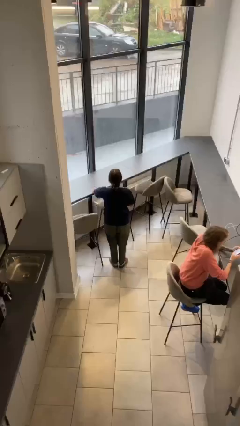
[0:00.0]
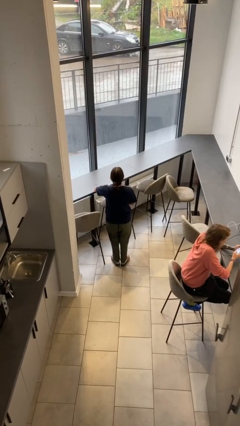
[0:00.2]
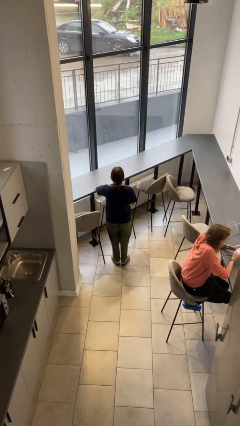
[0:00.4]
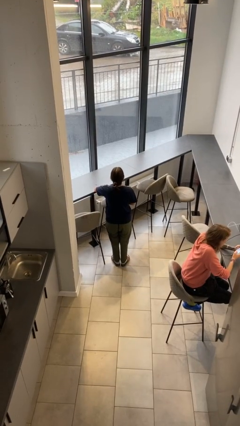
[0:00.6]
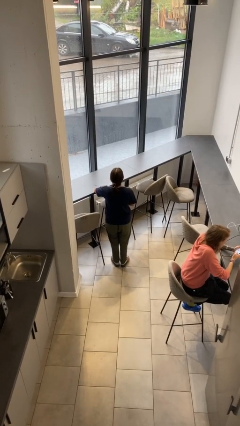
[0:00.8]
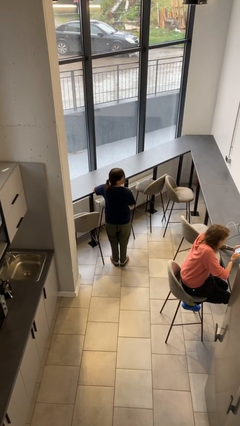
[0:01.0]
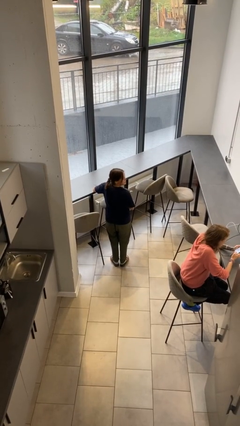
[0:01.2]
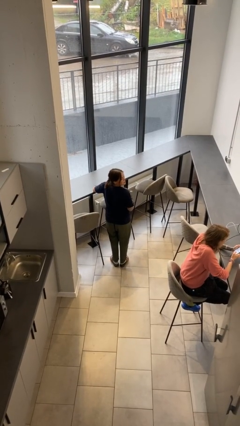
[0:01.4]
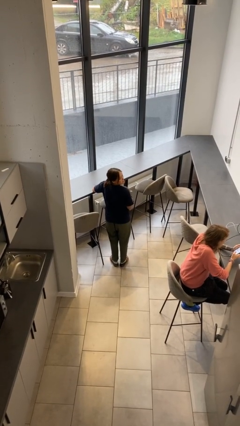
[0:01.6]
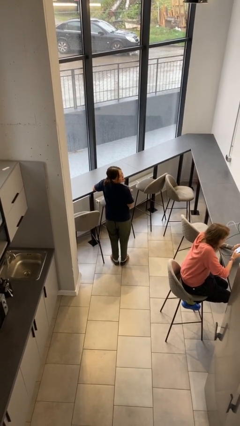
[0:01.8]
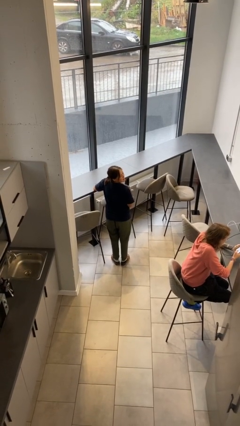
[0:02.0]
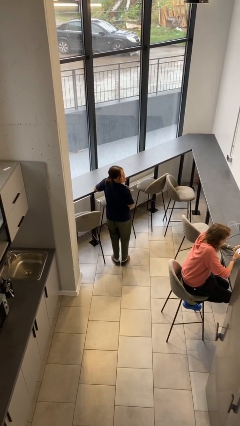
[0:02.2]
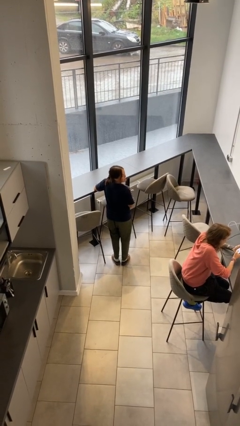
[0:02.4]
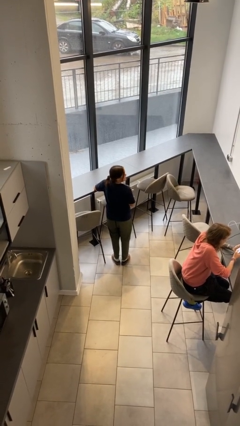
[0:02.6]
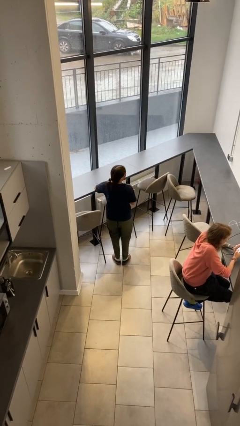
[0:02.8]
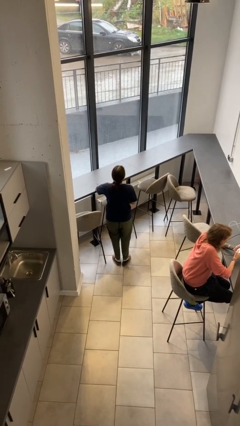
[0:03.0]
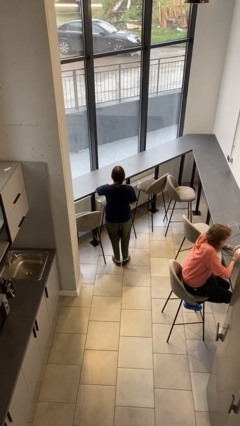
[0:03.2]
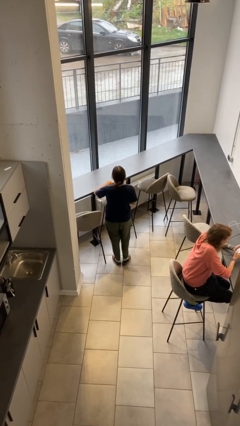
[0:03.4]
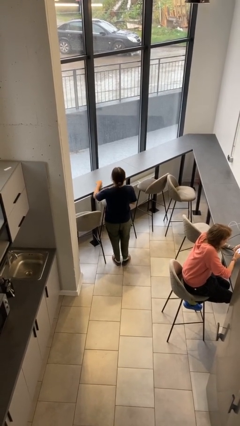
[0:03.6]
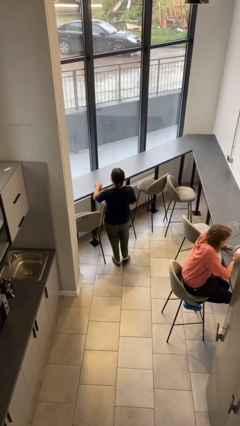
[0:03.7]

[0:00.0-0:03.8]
person looks over shoulder

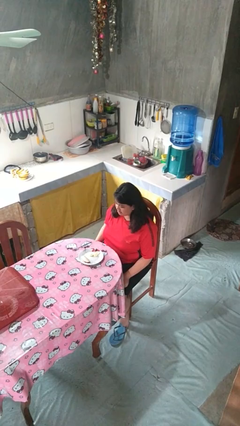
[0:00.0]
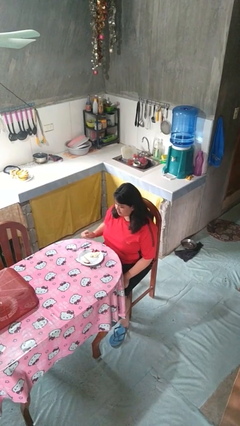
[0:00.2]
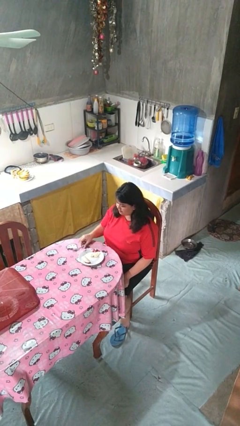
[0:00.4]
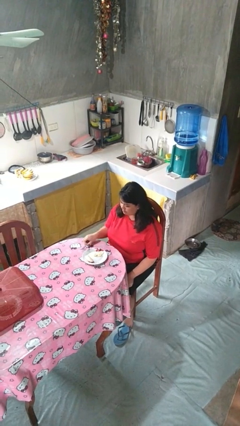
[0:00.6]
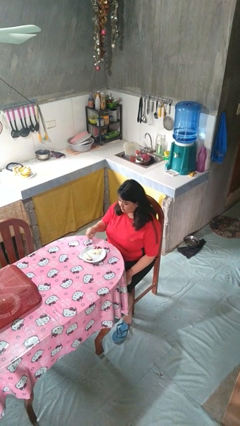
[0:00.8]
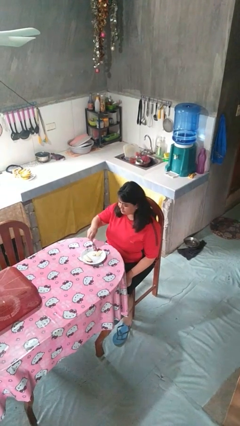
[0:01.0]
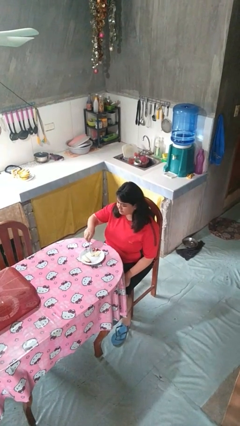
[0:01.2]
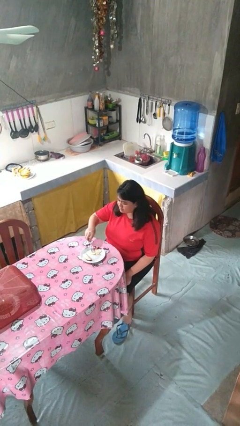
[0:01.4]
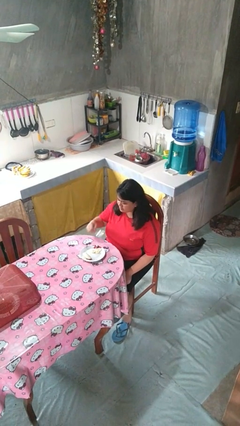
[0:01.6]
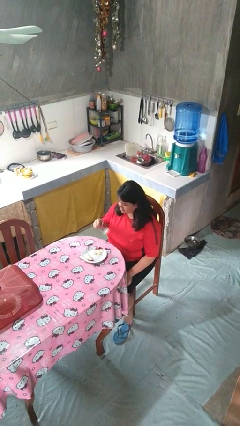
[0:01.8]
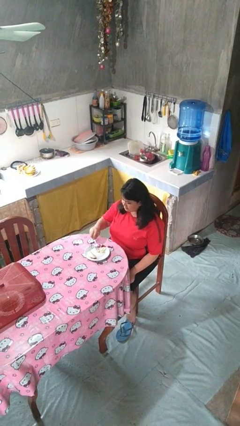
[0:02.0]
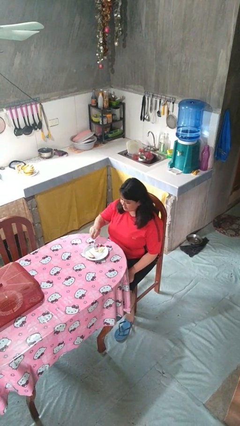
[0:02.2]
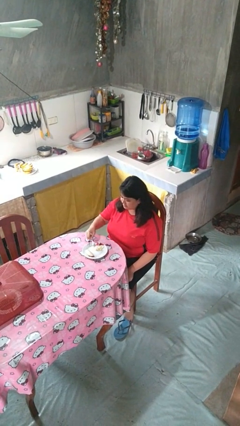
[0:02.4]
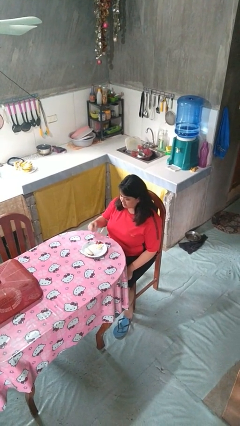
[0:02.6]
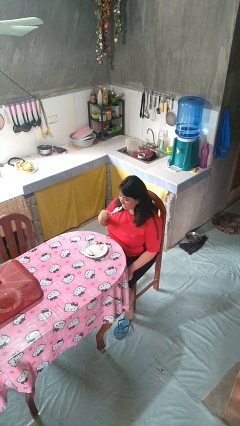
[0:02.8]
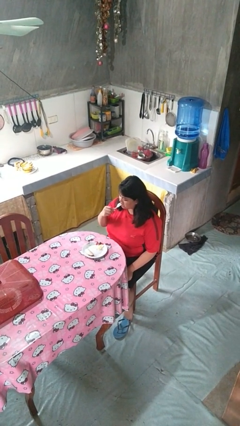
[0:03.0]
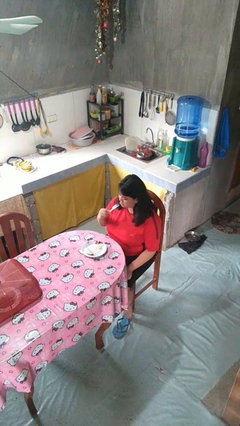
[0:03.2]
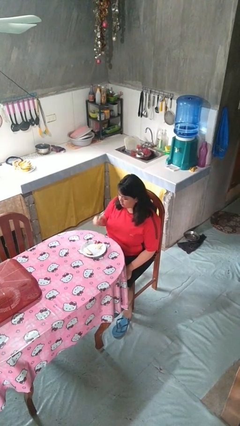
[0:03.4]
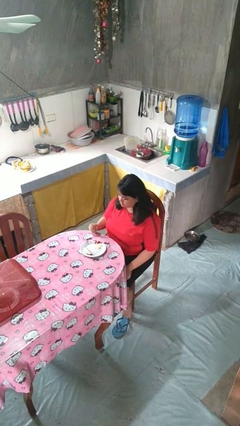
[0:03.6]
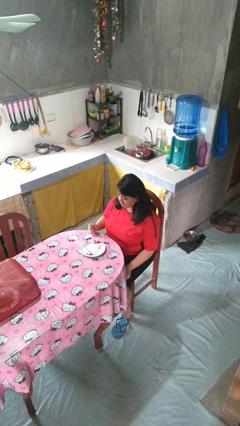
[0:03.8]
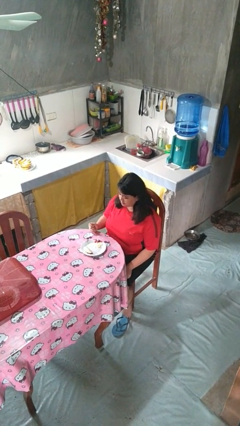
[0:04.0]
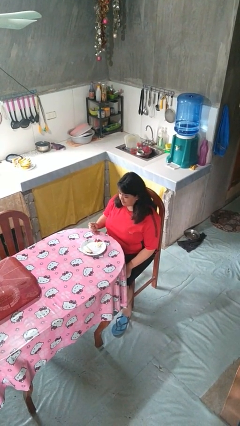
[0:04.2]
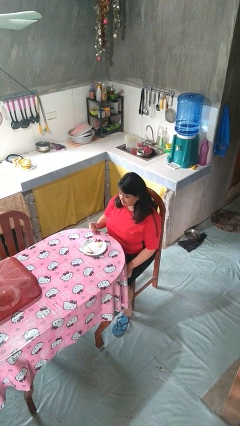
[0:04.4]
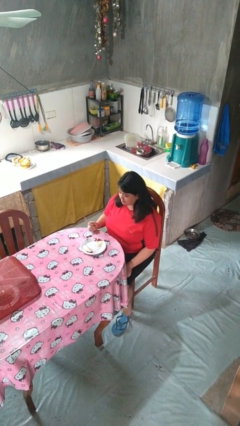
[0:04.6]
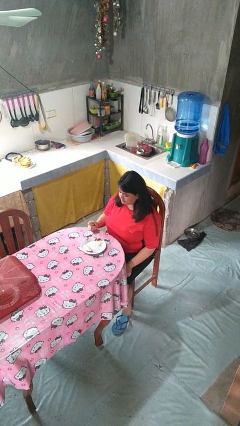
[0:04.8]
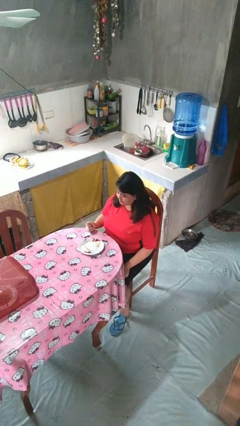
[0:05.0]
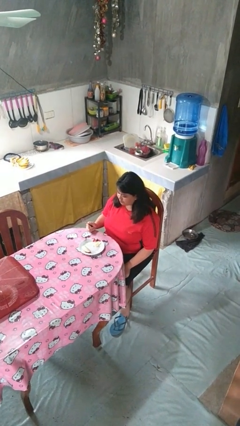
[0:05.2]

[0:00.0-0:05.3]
person eats with utensil

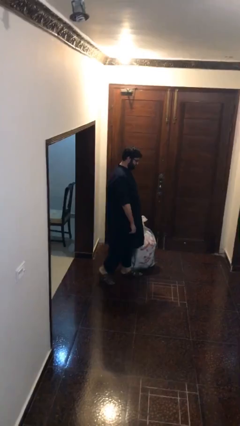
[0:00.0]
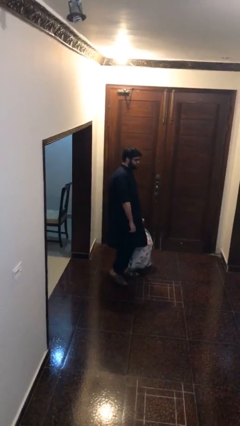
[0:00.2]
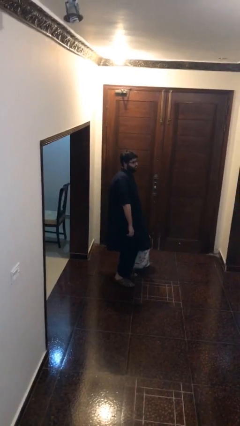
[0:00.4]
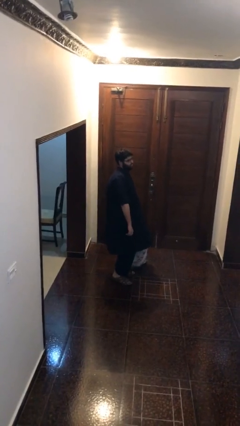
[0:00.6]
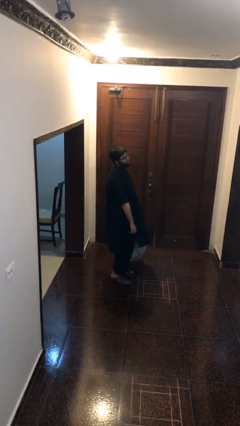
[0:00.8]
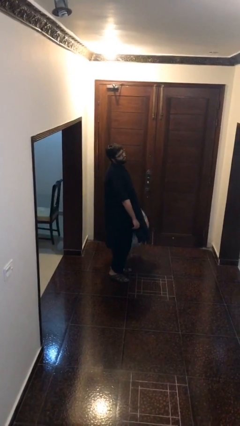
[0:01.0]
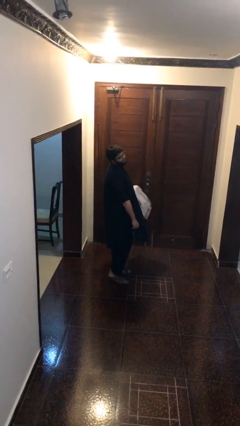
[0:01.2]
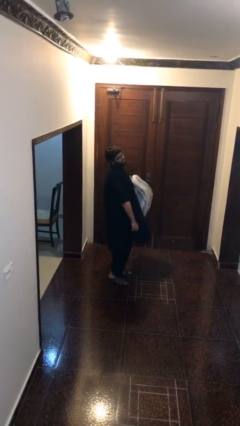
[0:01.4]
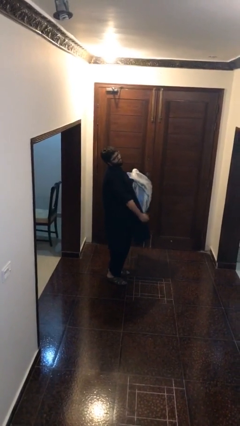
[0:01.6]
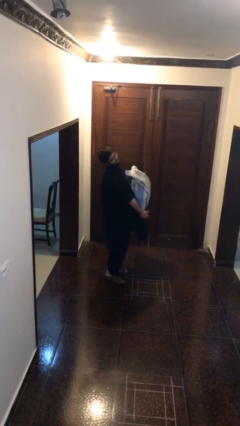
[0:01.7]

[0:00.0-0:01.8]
person picks up object from floor

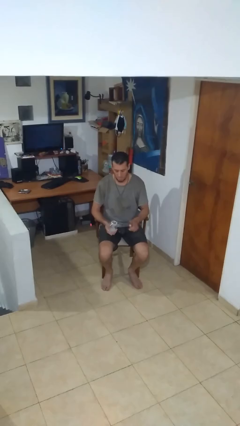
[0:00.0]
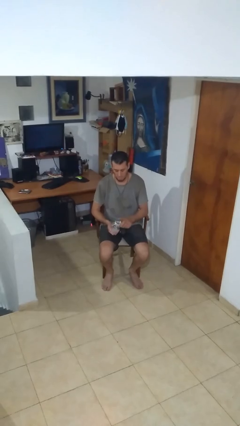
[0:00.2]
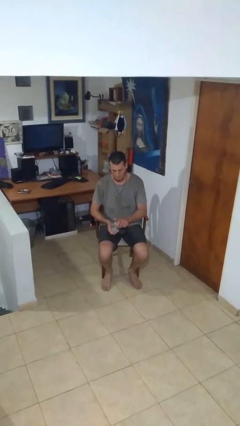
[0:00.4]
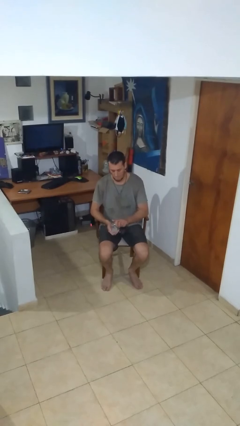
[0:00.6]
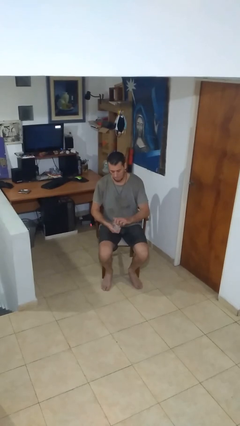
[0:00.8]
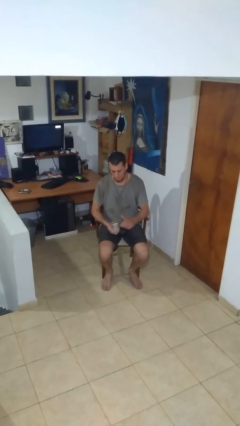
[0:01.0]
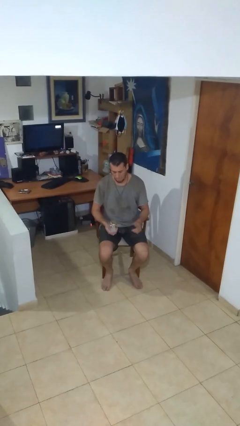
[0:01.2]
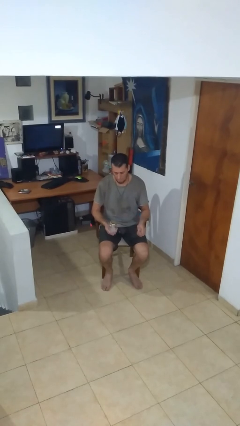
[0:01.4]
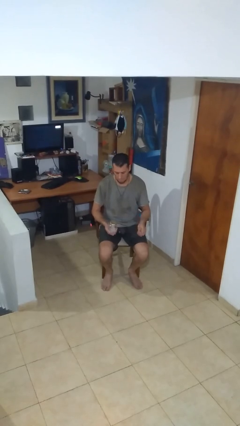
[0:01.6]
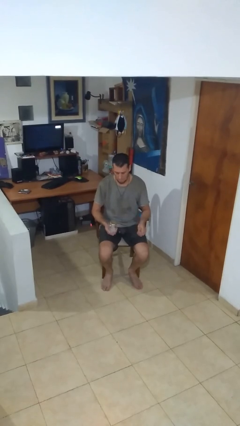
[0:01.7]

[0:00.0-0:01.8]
person closes jar

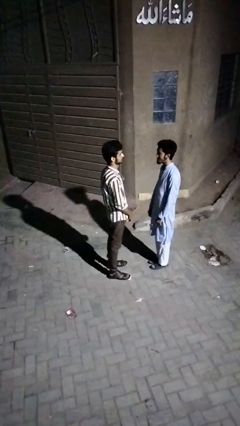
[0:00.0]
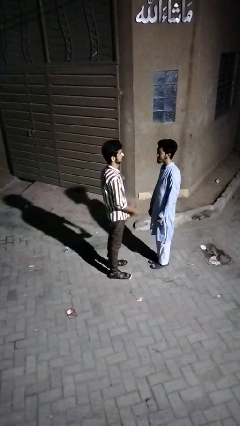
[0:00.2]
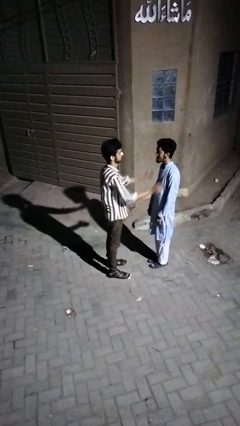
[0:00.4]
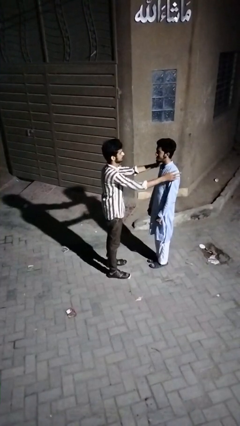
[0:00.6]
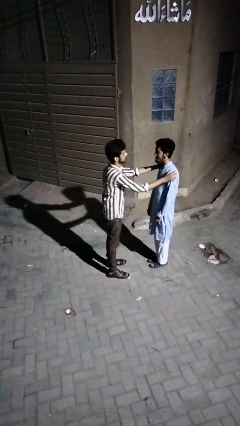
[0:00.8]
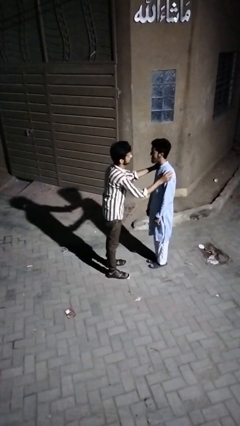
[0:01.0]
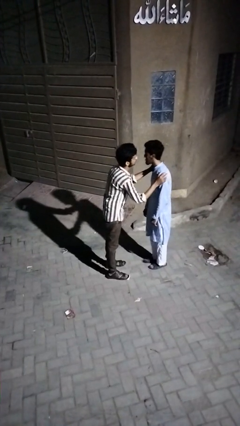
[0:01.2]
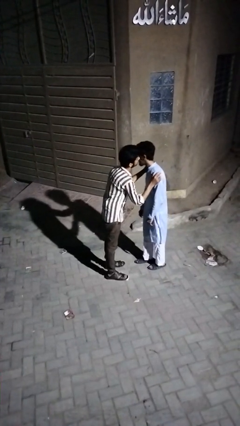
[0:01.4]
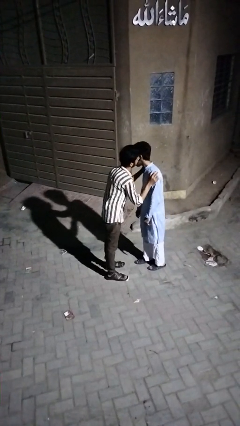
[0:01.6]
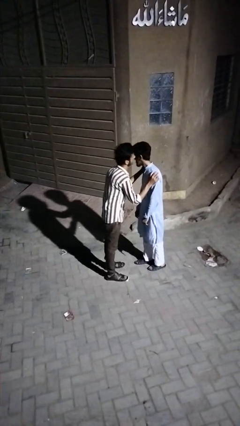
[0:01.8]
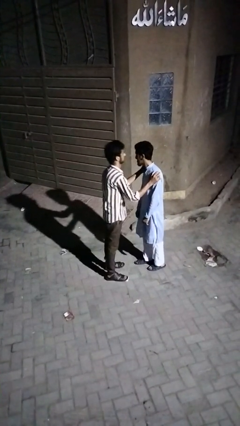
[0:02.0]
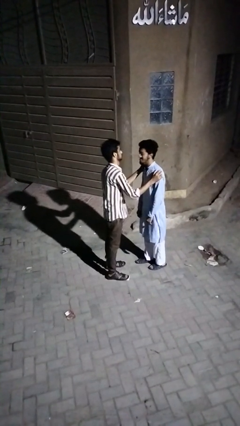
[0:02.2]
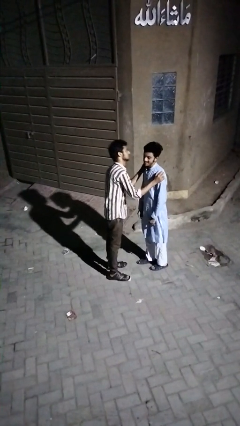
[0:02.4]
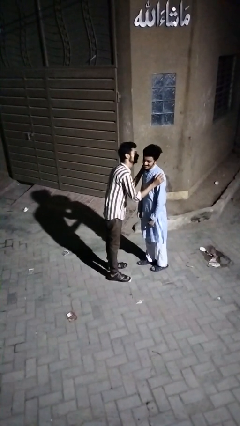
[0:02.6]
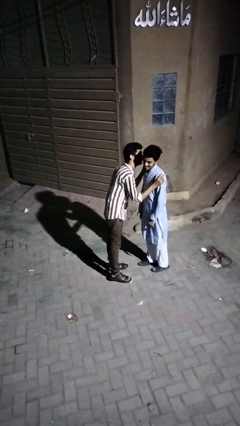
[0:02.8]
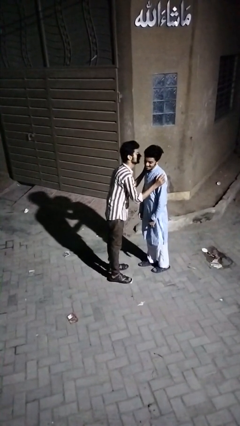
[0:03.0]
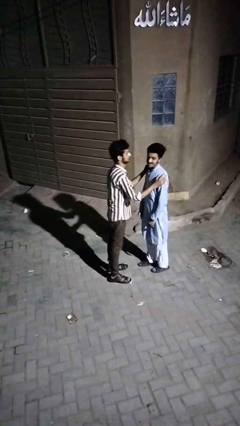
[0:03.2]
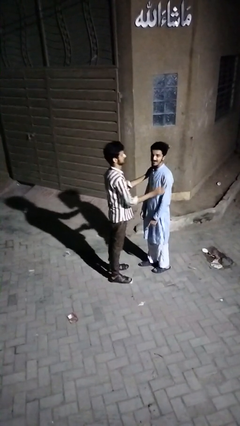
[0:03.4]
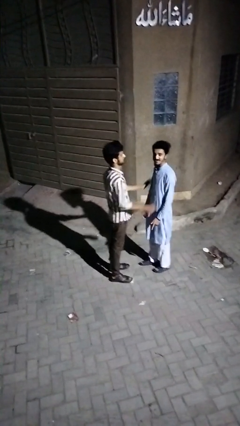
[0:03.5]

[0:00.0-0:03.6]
person kisses cheek of person

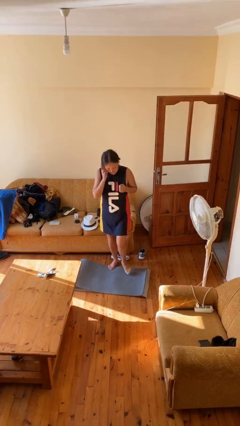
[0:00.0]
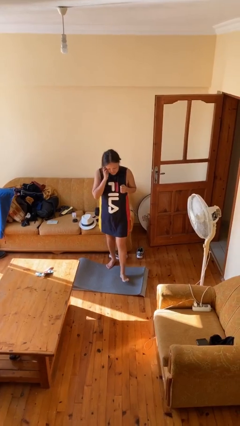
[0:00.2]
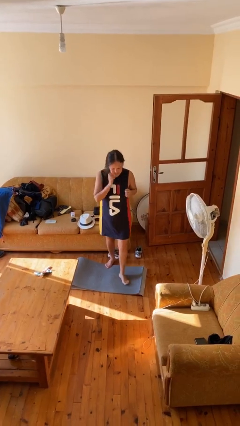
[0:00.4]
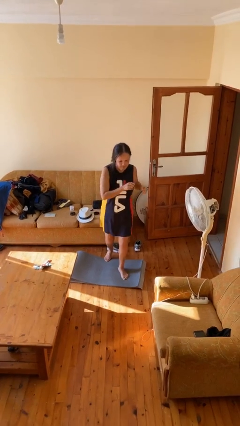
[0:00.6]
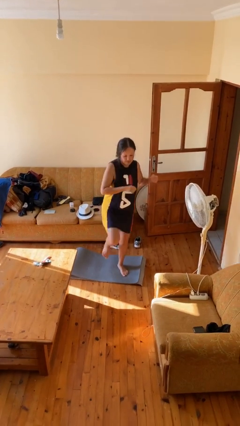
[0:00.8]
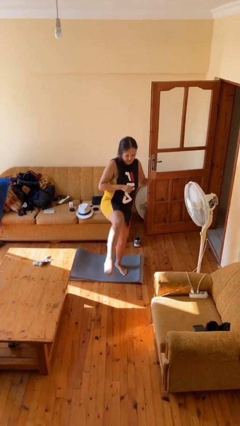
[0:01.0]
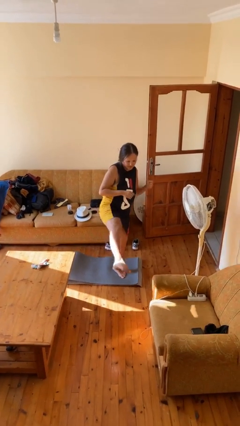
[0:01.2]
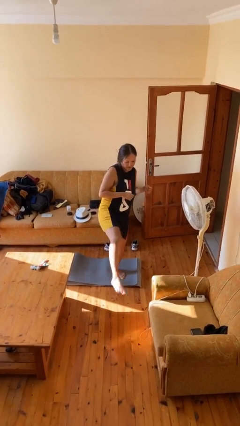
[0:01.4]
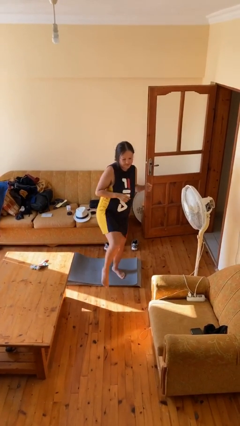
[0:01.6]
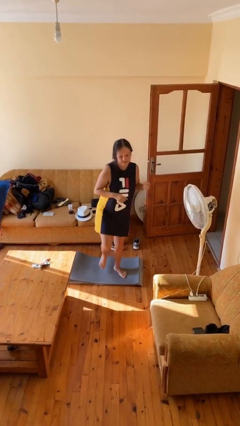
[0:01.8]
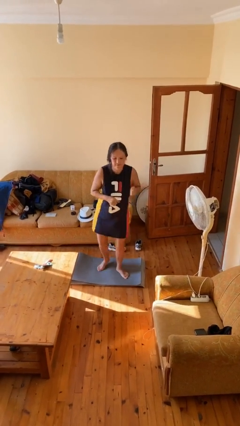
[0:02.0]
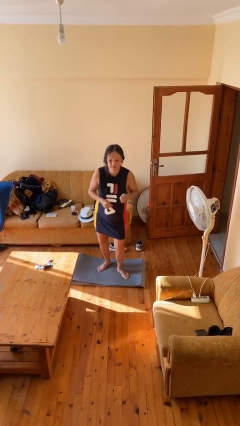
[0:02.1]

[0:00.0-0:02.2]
person karate kicks
